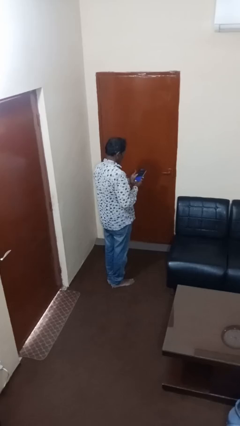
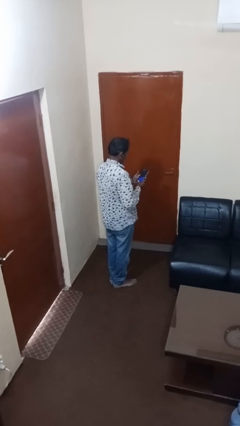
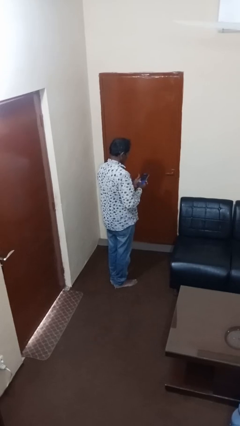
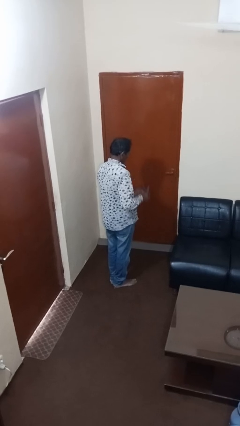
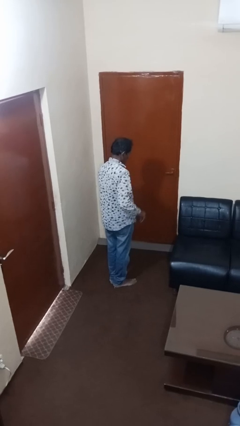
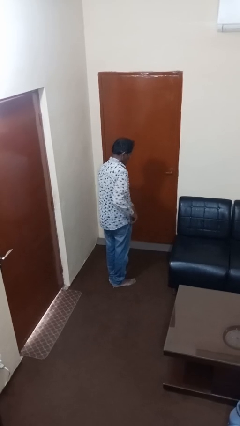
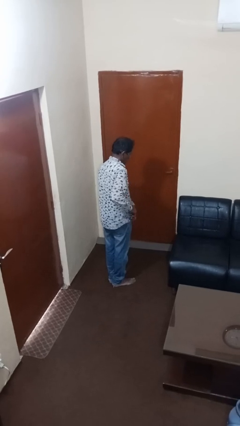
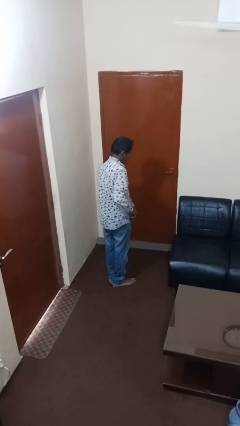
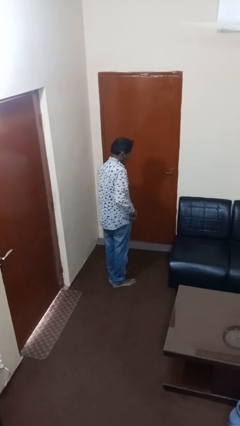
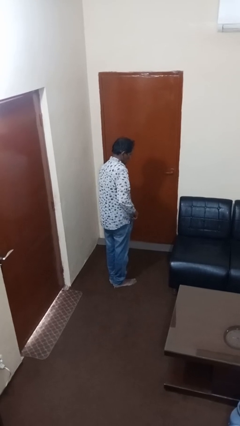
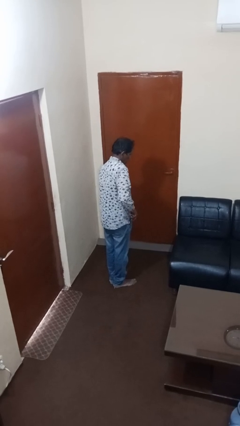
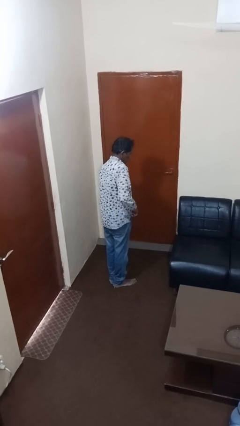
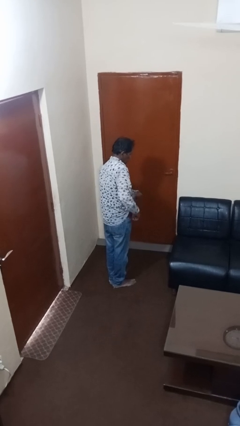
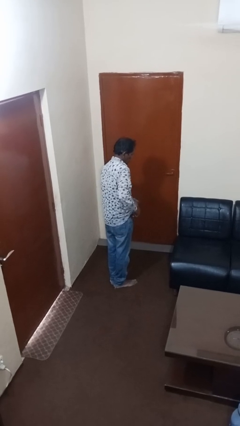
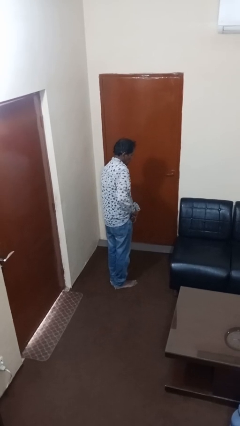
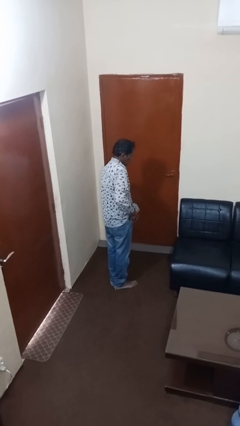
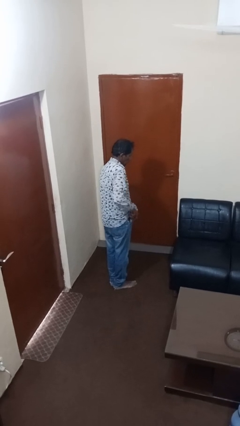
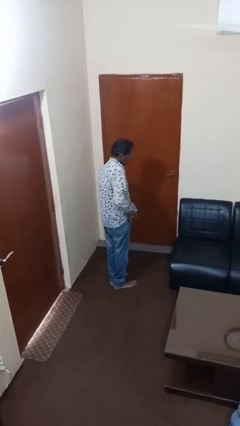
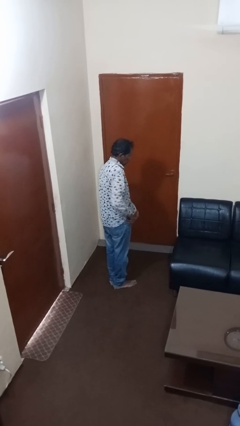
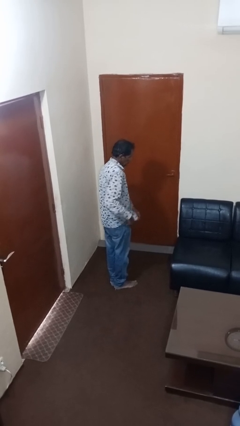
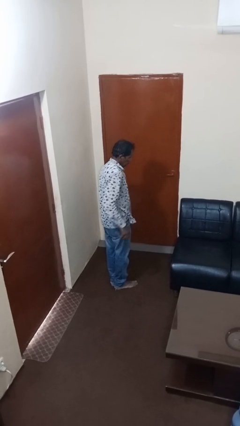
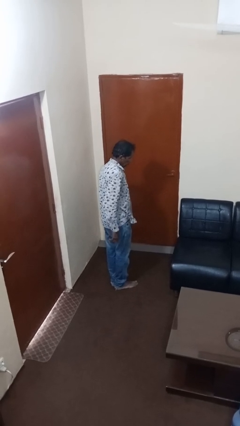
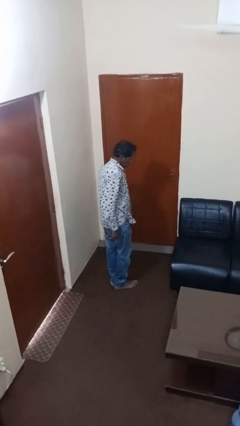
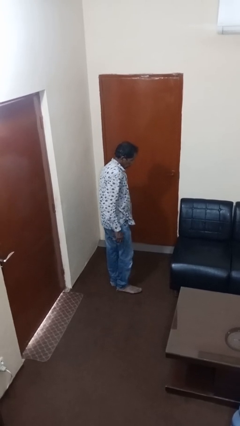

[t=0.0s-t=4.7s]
person puts phone into pocket

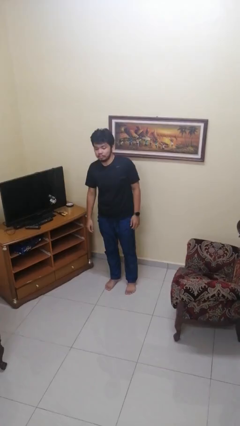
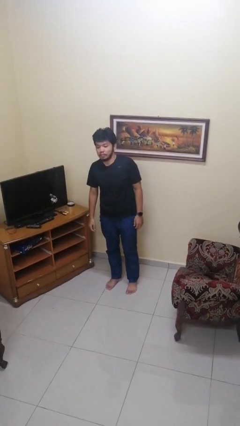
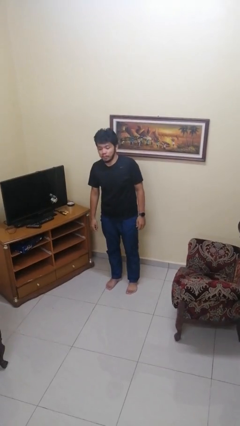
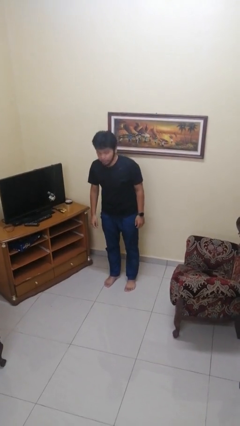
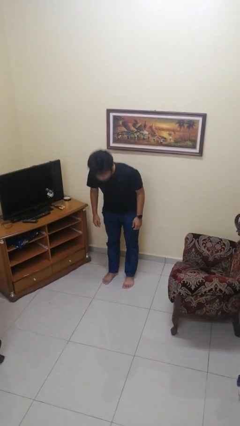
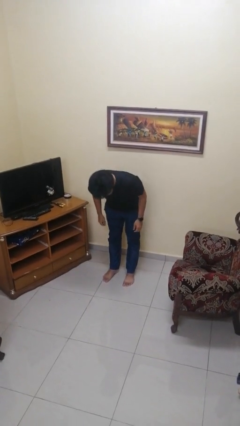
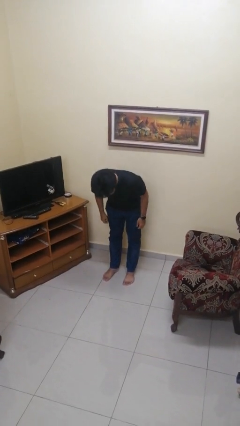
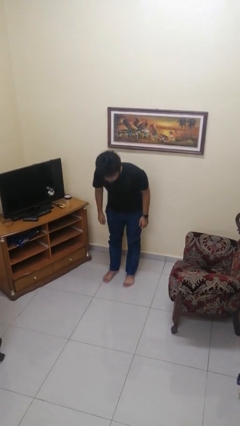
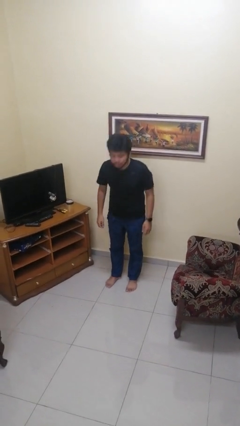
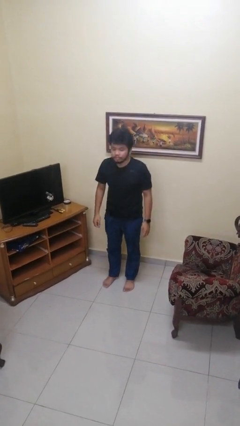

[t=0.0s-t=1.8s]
person bows

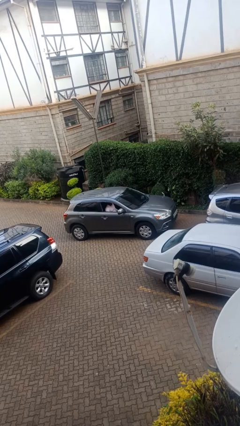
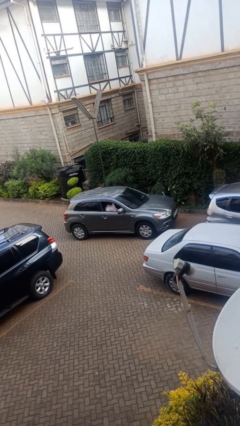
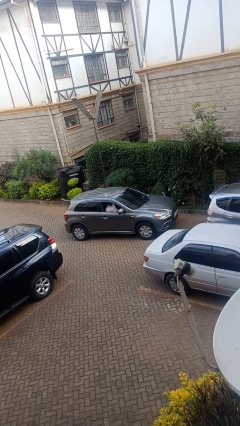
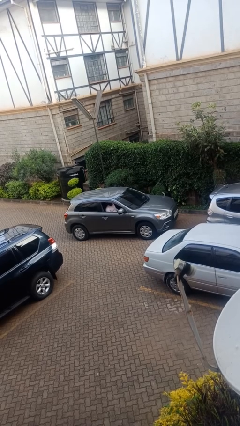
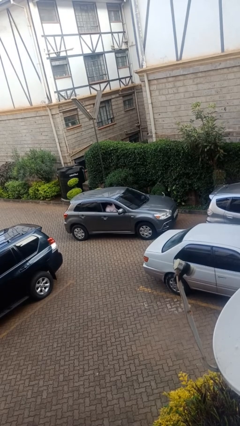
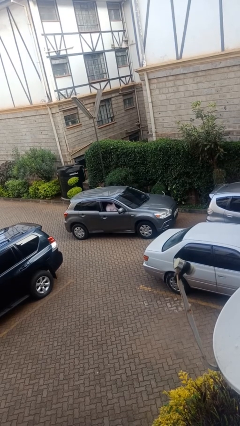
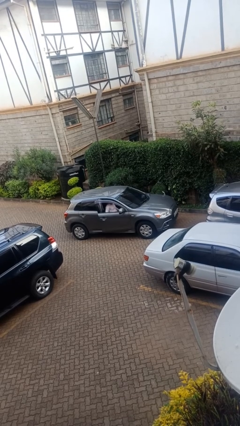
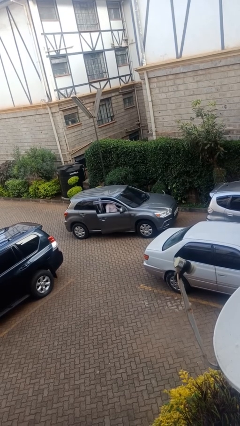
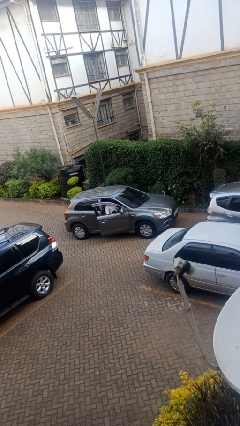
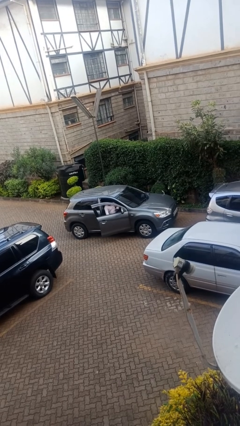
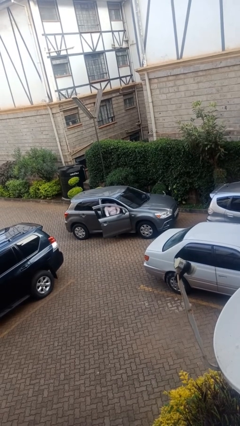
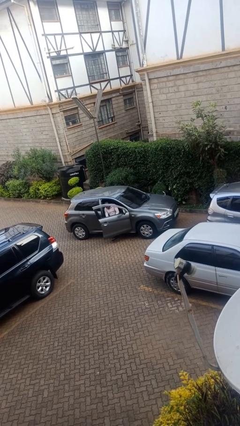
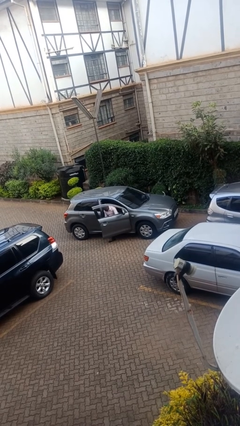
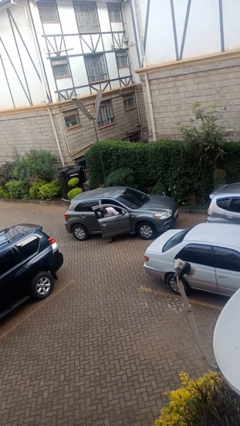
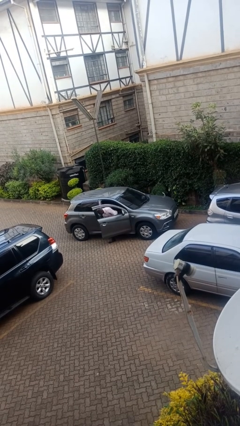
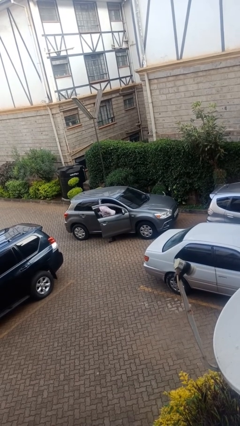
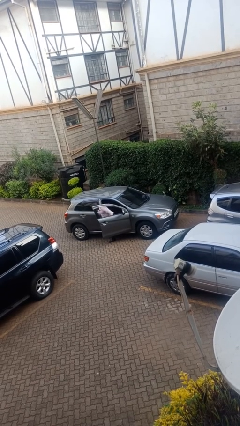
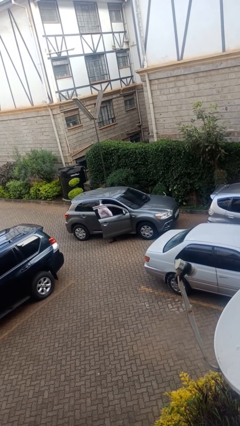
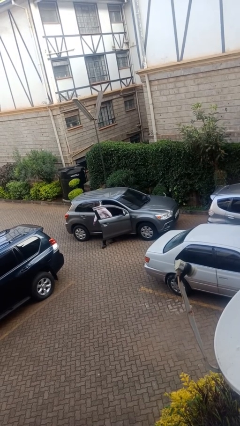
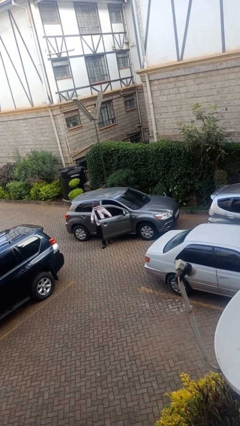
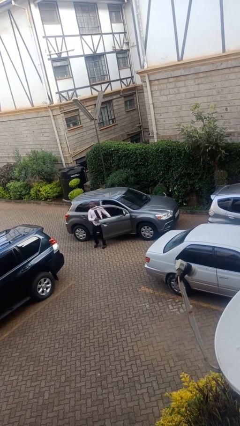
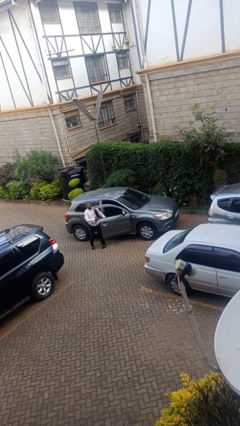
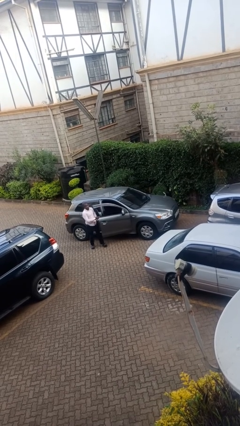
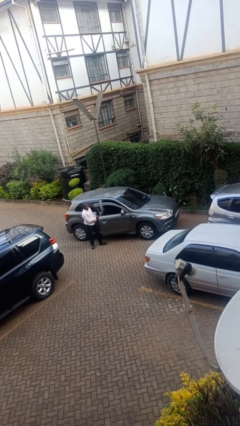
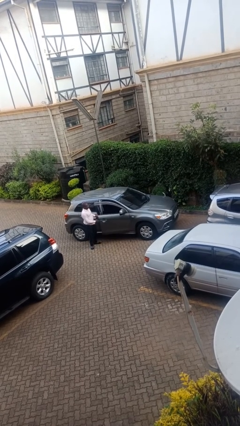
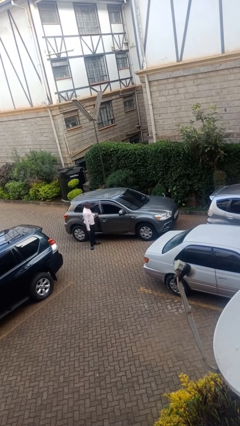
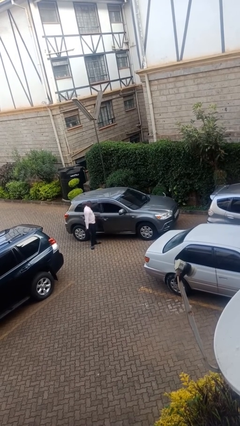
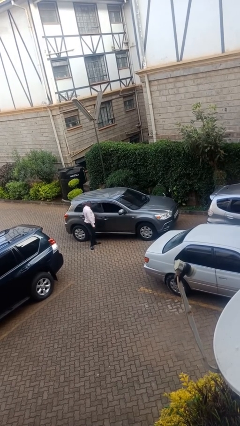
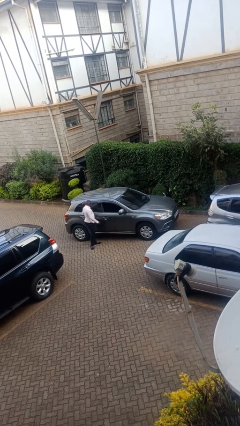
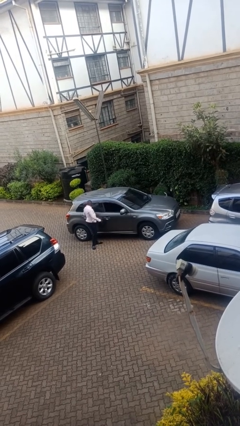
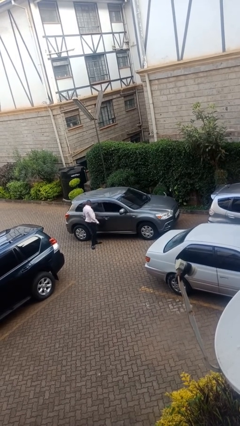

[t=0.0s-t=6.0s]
car drops off person

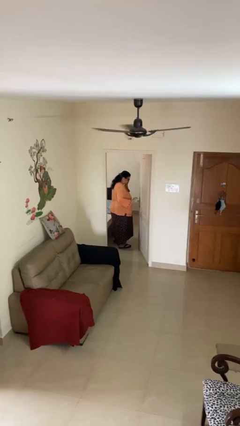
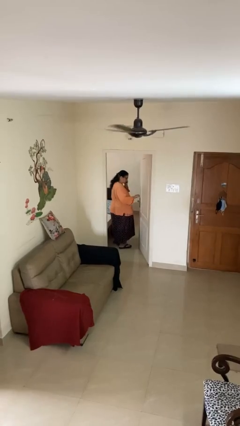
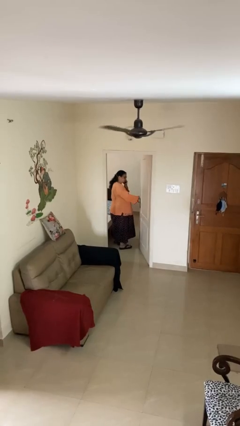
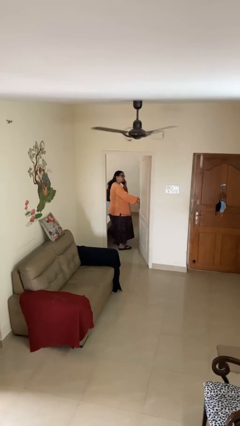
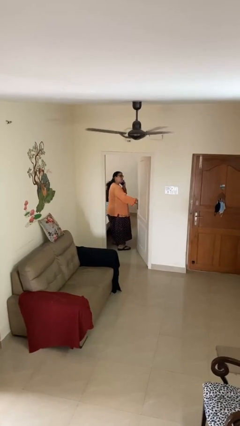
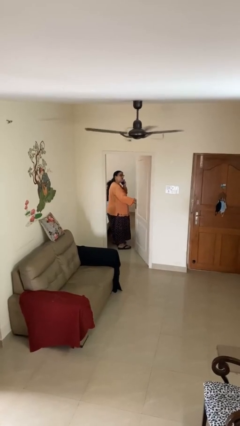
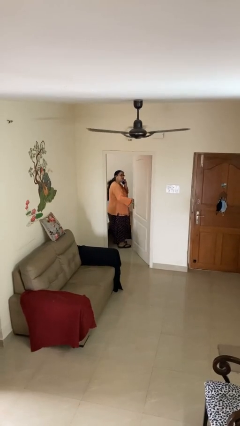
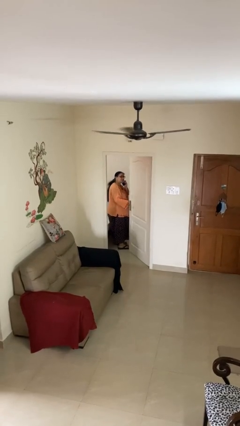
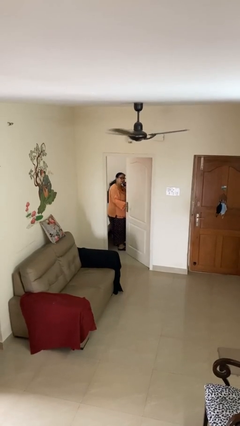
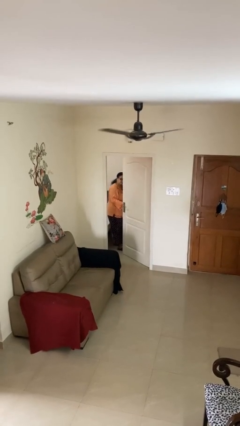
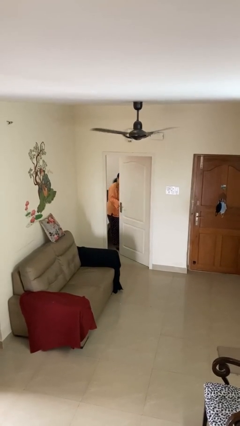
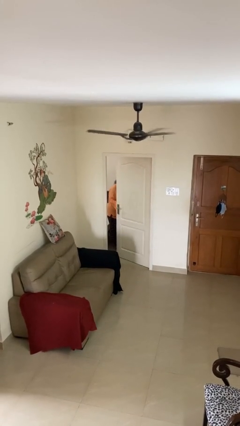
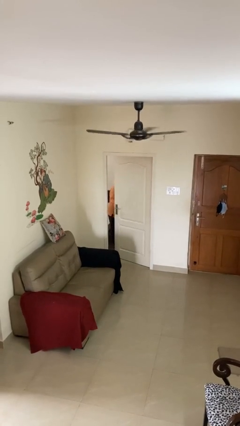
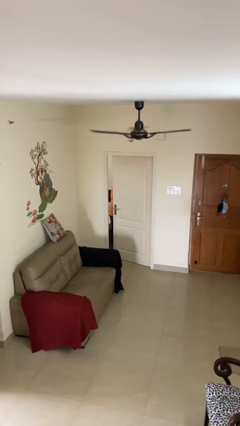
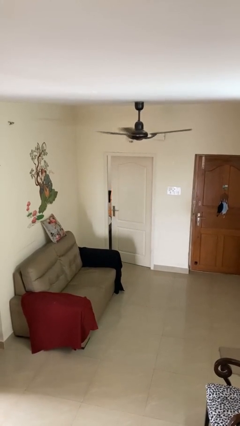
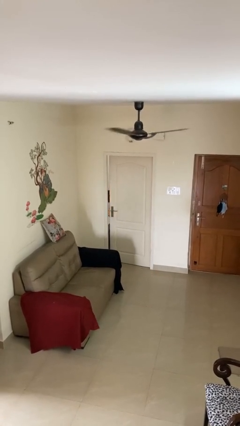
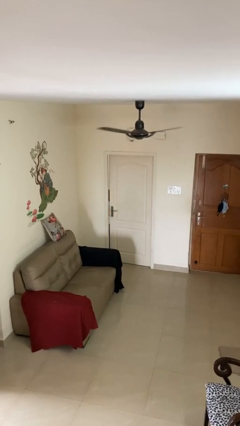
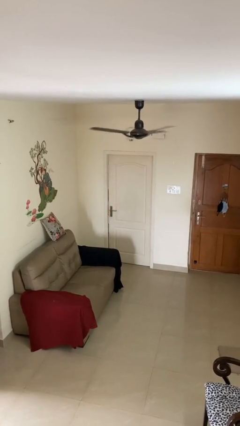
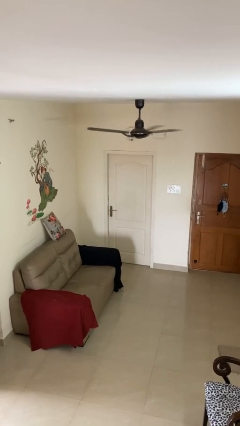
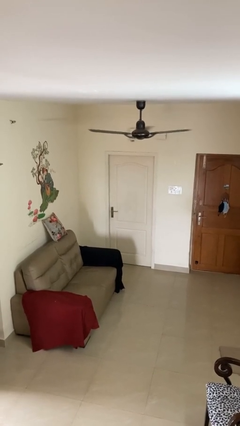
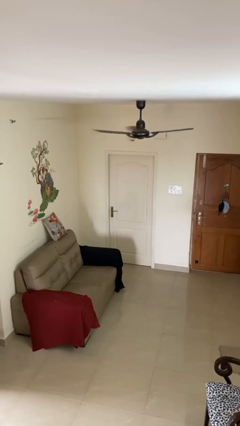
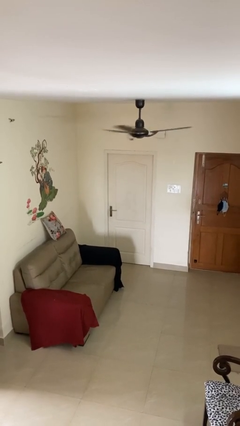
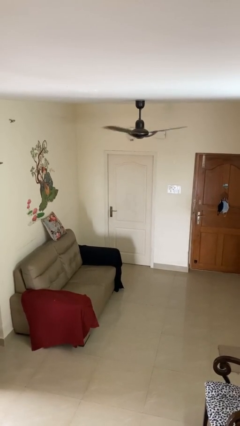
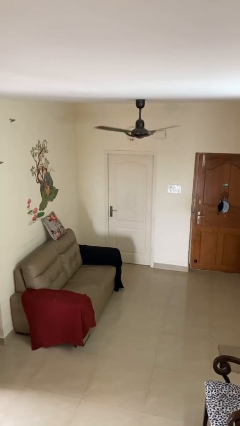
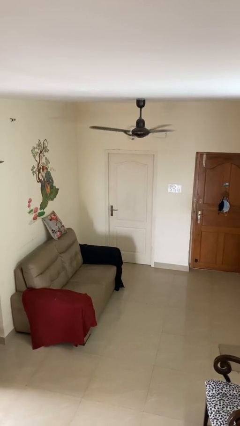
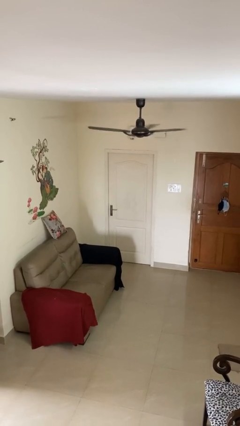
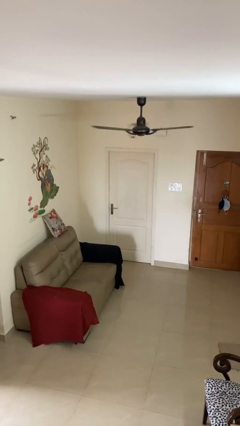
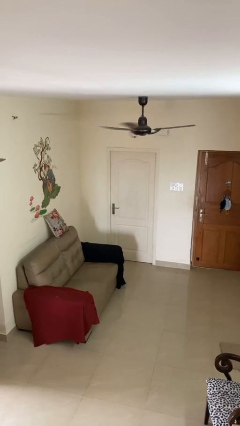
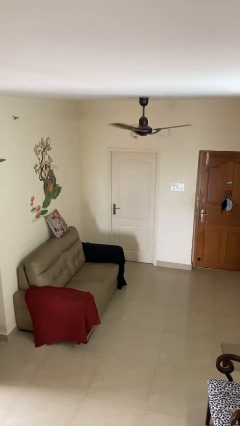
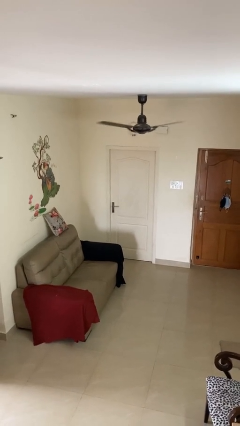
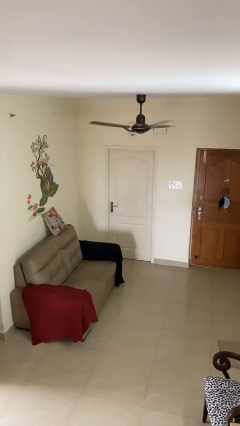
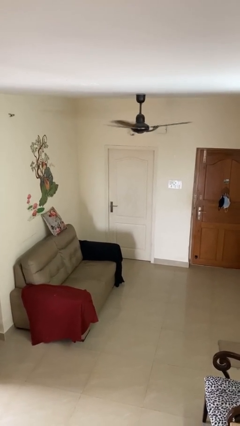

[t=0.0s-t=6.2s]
person closes facility door
